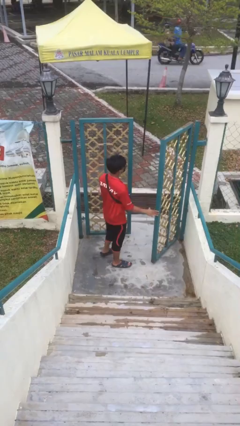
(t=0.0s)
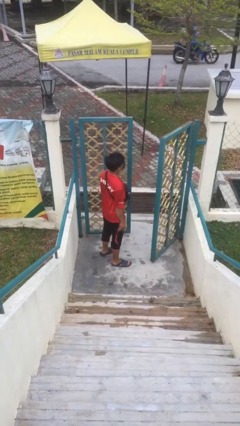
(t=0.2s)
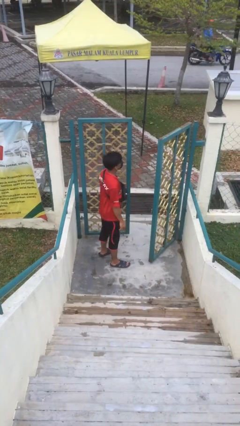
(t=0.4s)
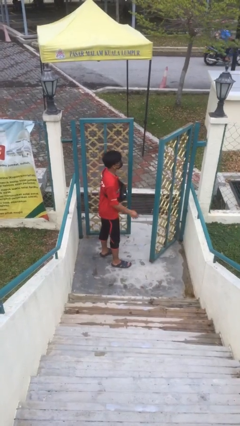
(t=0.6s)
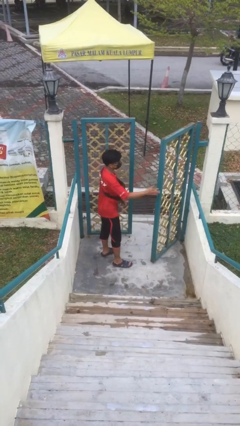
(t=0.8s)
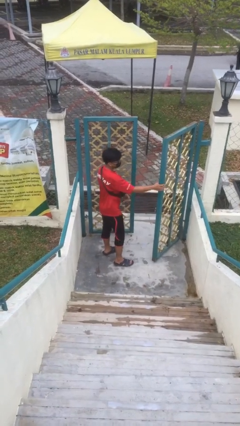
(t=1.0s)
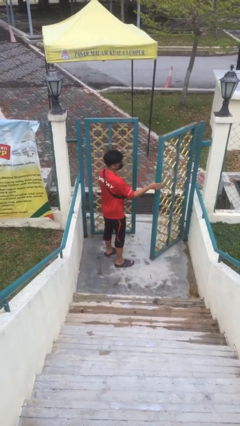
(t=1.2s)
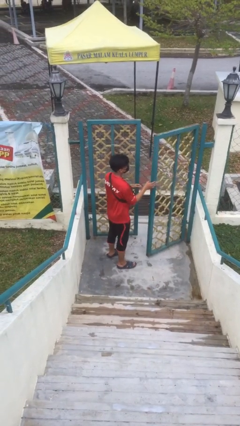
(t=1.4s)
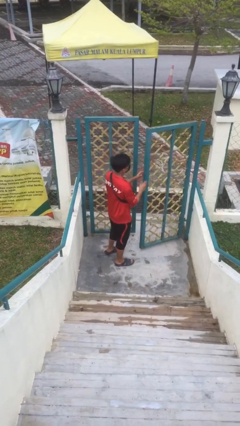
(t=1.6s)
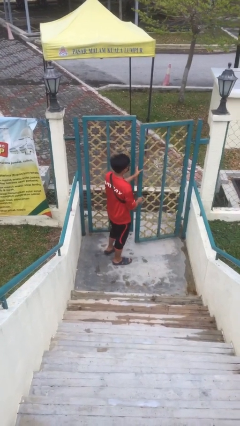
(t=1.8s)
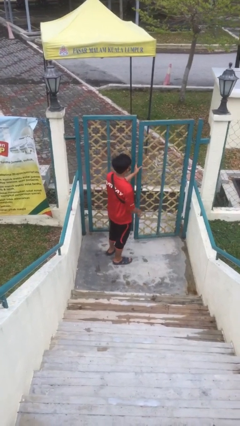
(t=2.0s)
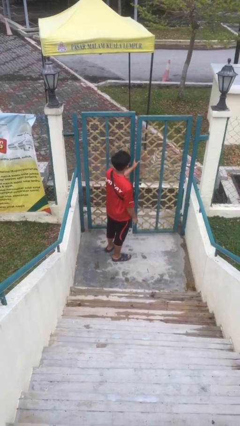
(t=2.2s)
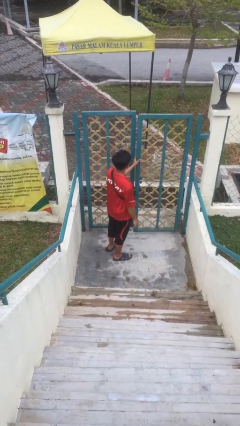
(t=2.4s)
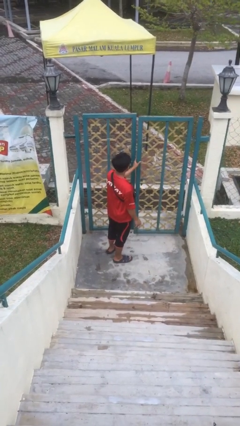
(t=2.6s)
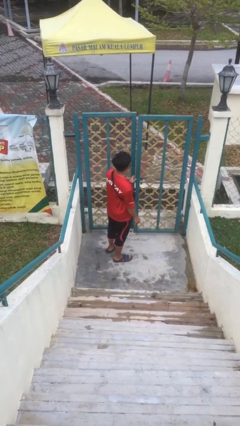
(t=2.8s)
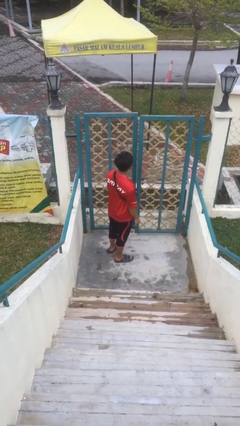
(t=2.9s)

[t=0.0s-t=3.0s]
person closes facility door

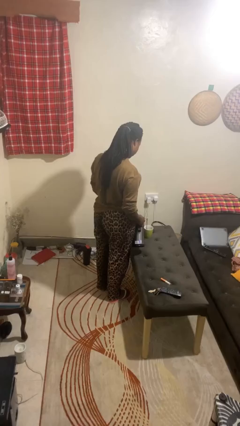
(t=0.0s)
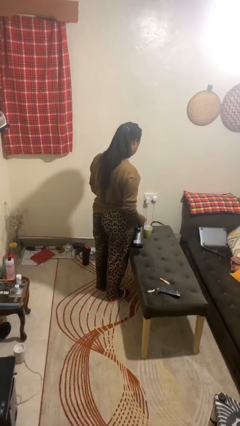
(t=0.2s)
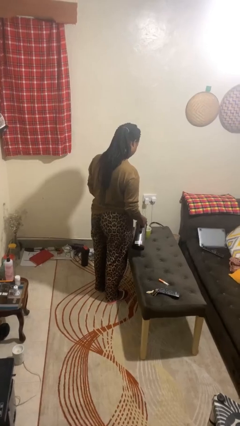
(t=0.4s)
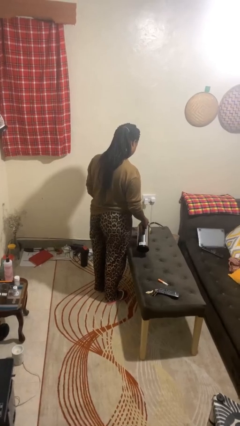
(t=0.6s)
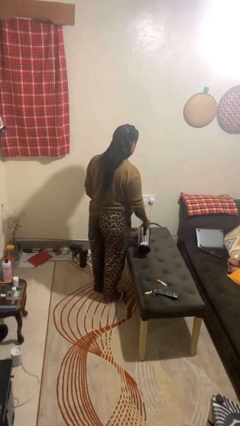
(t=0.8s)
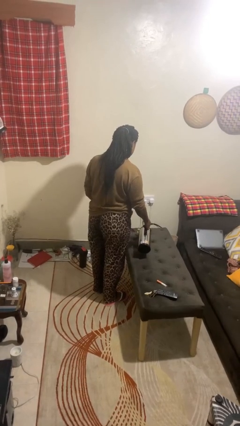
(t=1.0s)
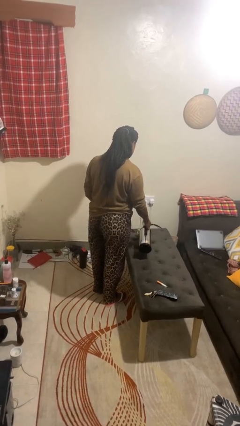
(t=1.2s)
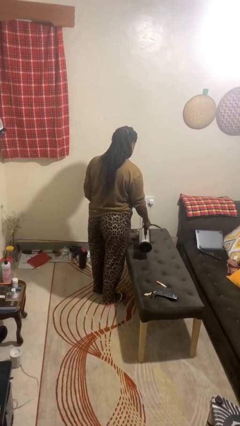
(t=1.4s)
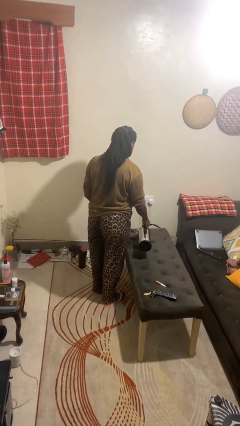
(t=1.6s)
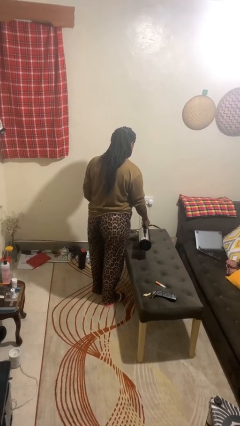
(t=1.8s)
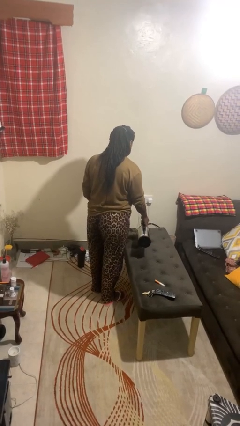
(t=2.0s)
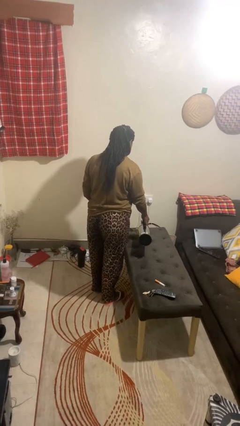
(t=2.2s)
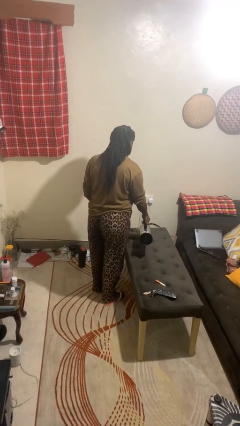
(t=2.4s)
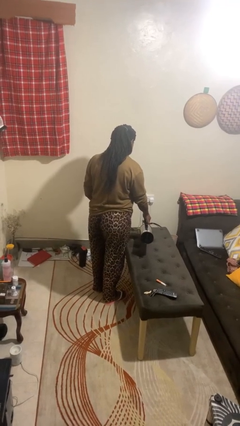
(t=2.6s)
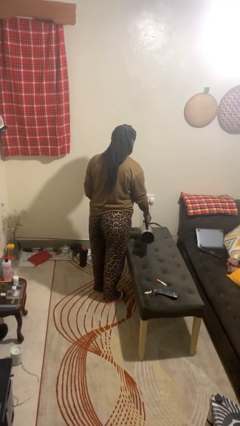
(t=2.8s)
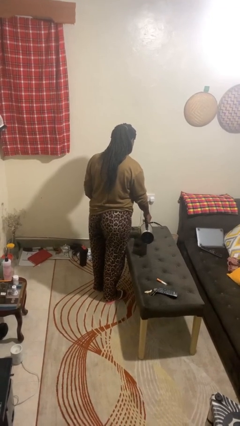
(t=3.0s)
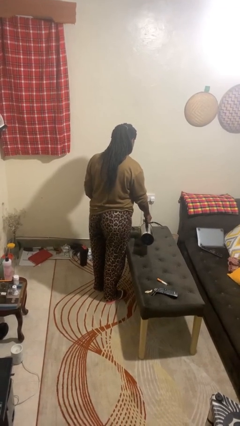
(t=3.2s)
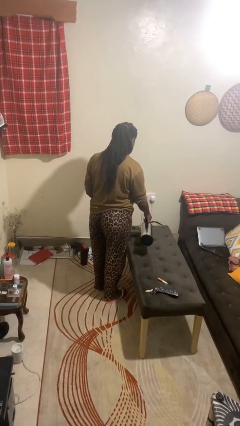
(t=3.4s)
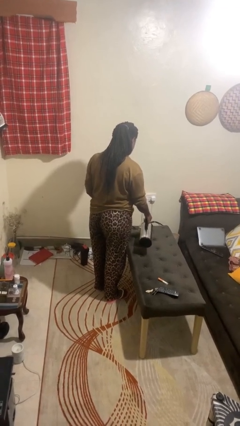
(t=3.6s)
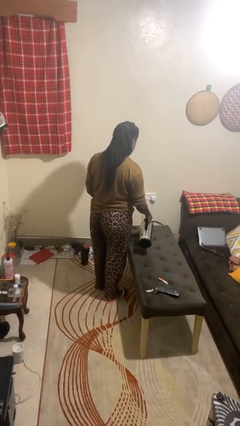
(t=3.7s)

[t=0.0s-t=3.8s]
person pours coffee into mug

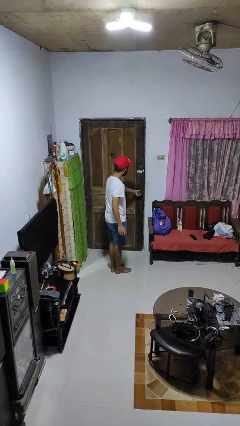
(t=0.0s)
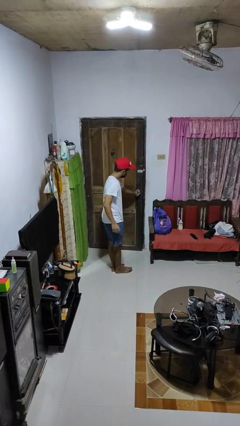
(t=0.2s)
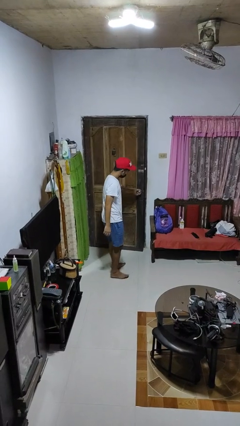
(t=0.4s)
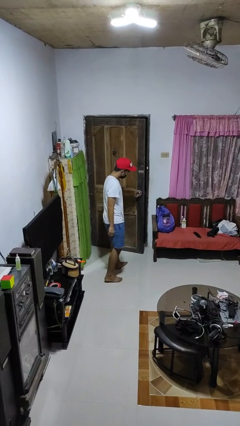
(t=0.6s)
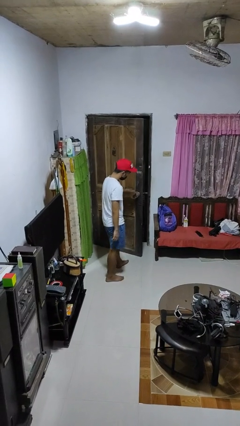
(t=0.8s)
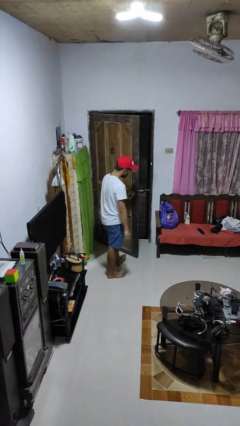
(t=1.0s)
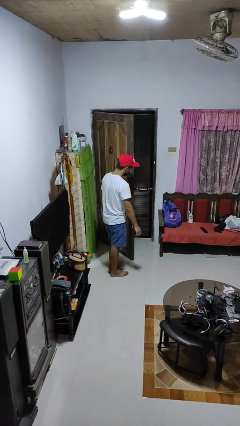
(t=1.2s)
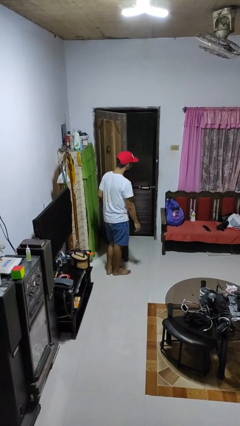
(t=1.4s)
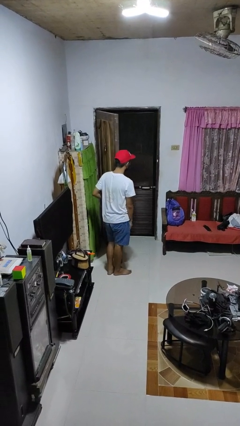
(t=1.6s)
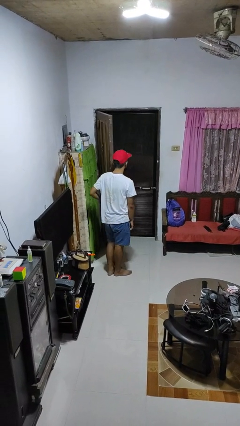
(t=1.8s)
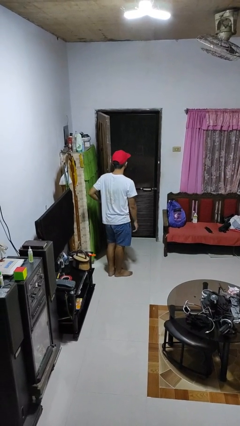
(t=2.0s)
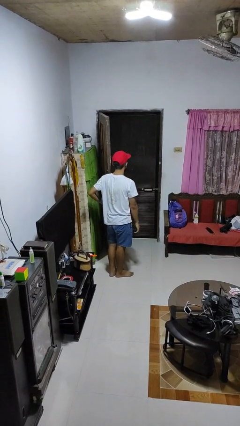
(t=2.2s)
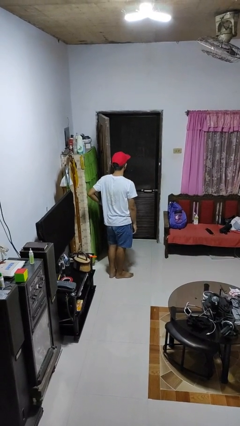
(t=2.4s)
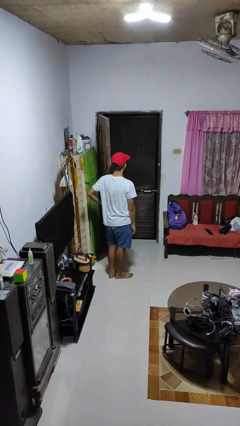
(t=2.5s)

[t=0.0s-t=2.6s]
person opens facility door

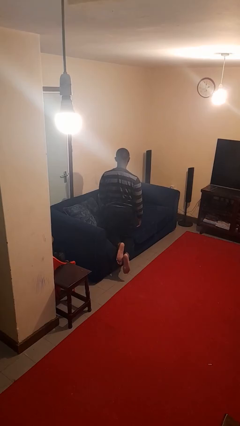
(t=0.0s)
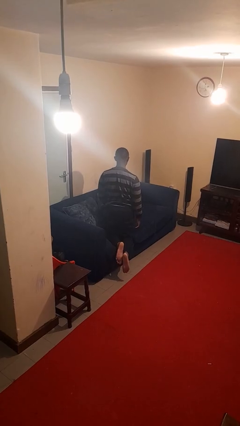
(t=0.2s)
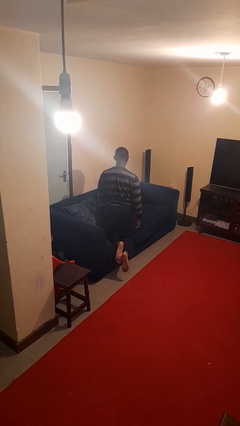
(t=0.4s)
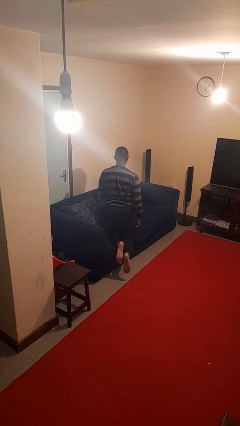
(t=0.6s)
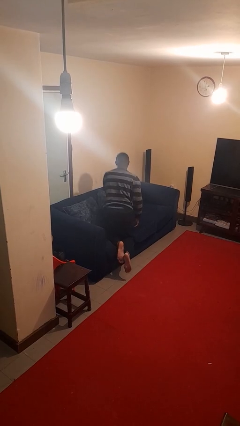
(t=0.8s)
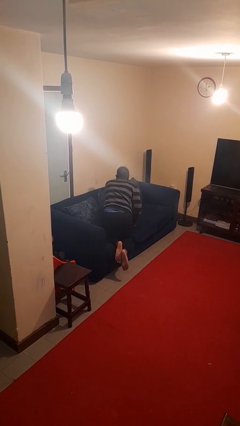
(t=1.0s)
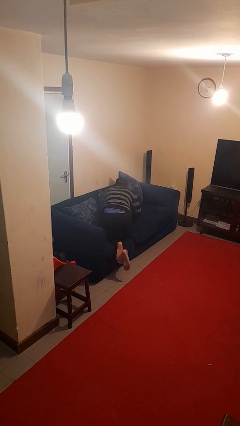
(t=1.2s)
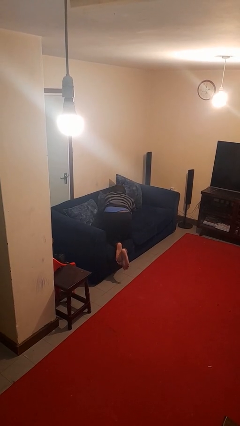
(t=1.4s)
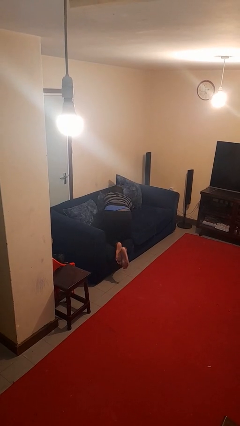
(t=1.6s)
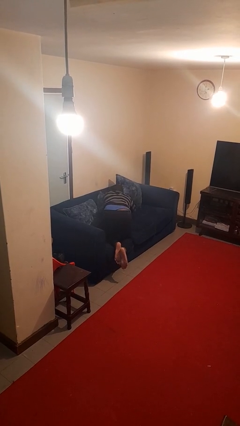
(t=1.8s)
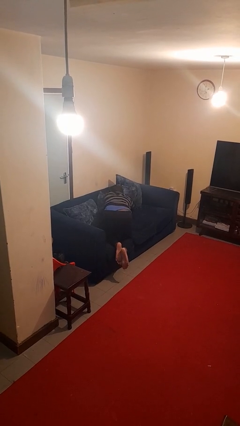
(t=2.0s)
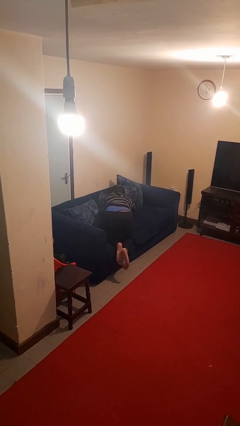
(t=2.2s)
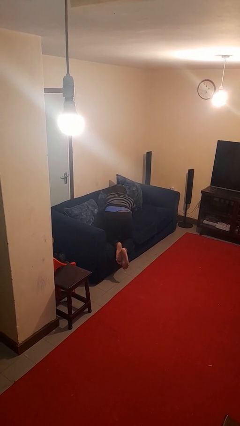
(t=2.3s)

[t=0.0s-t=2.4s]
person searches in couch

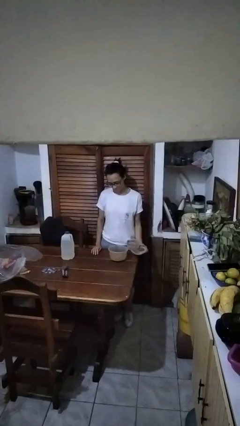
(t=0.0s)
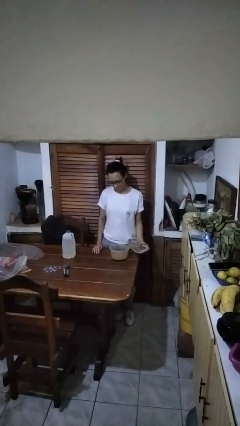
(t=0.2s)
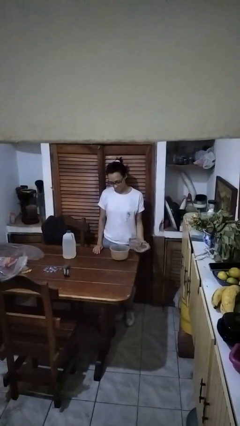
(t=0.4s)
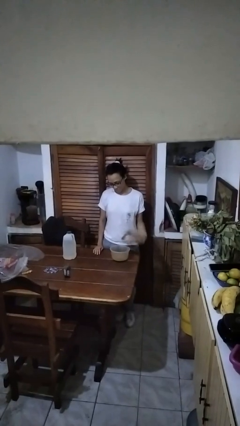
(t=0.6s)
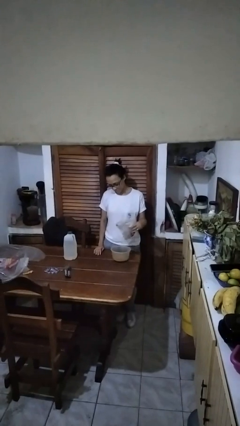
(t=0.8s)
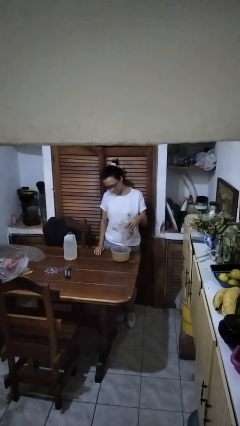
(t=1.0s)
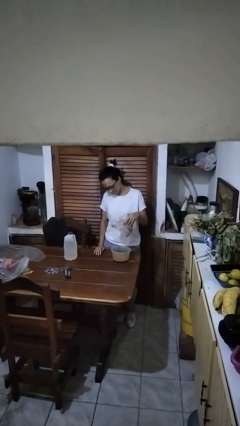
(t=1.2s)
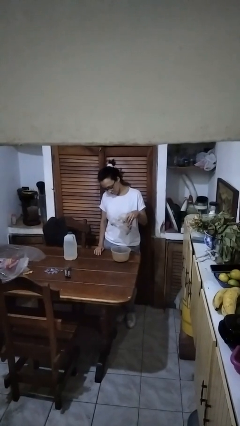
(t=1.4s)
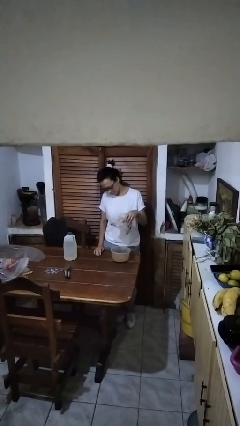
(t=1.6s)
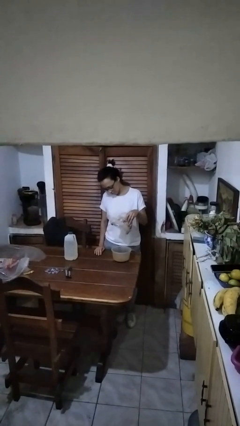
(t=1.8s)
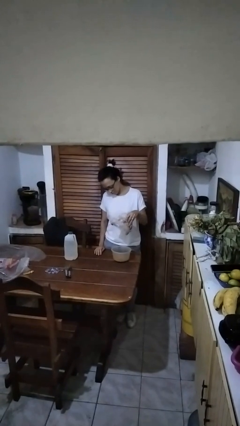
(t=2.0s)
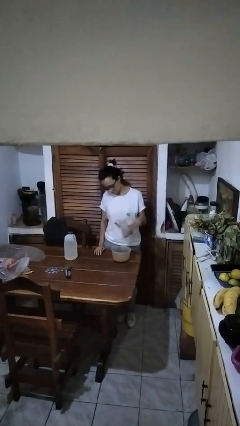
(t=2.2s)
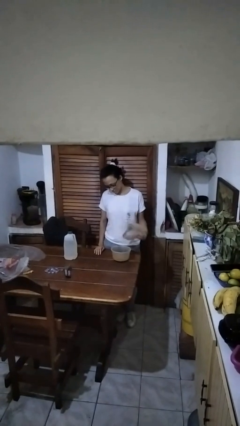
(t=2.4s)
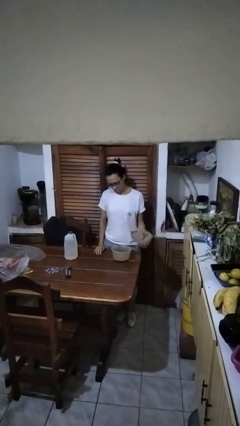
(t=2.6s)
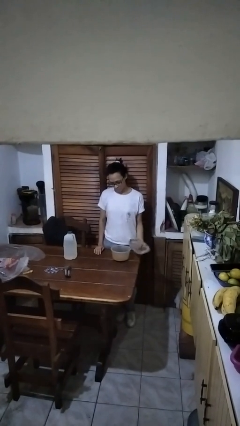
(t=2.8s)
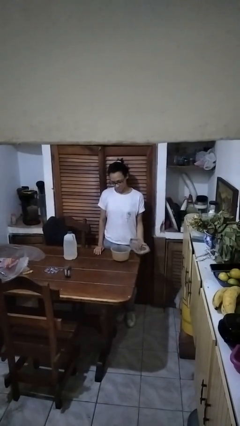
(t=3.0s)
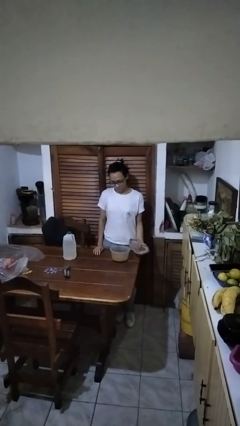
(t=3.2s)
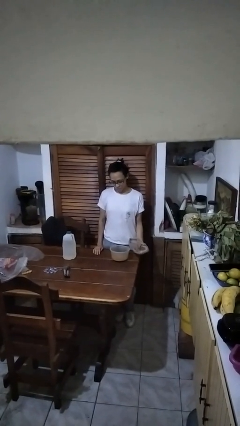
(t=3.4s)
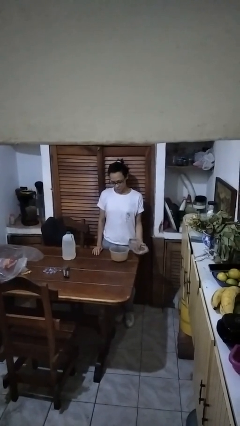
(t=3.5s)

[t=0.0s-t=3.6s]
person pours into bowl

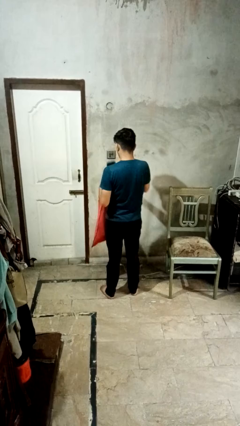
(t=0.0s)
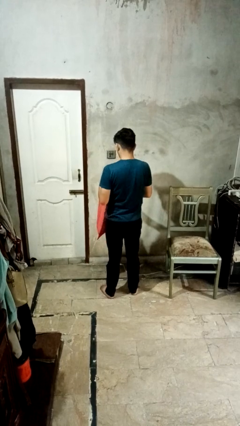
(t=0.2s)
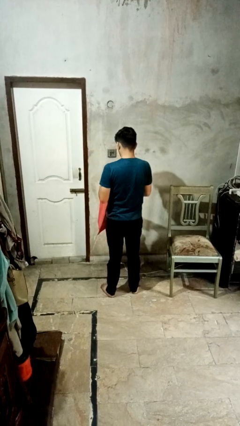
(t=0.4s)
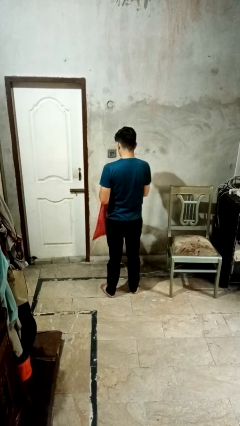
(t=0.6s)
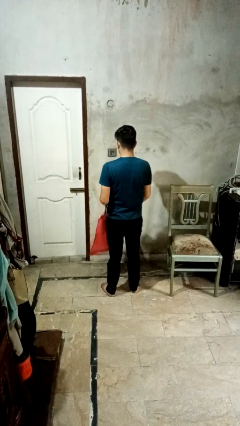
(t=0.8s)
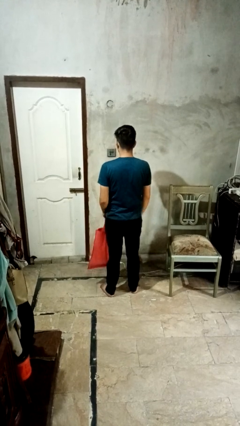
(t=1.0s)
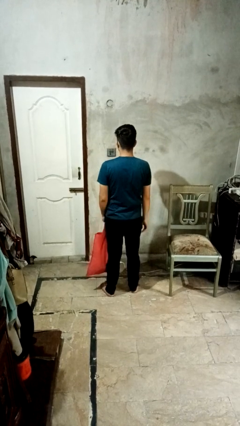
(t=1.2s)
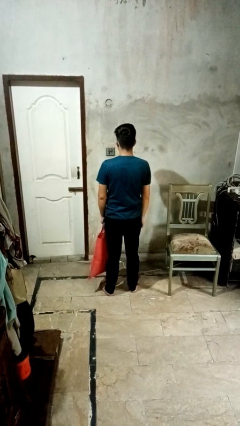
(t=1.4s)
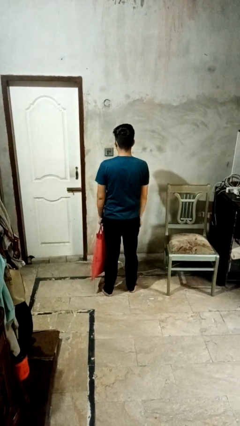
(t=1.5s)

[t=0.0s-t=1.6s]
person puts object into bag

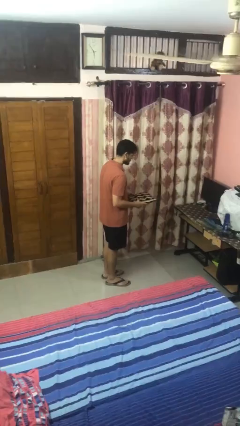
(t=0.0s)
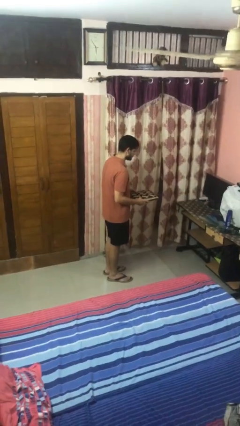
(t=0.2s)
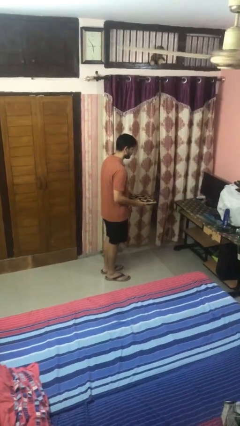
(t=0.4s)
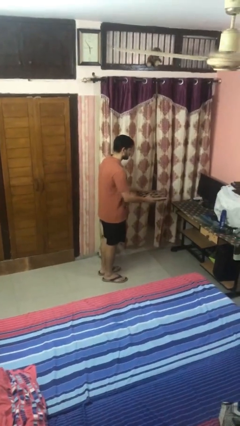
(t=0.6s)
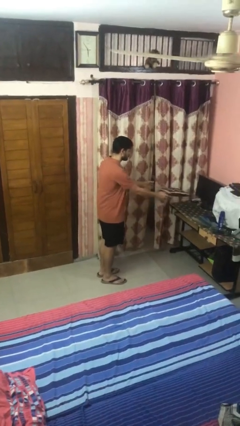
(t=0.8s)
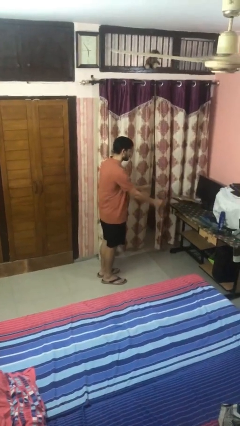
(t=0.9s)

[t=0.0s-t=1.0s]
person throws object on table
